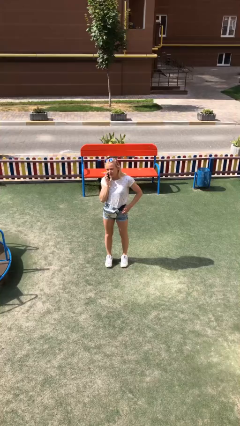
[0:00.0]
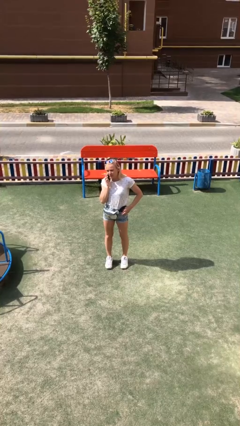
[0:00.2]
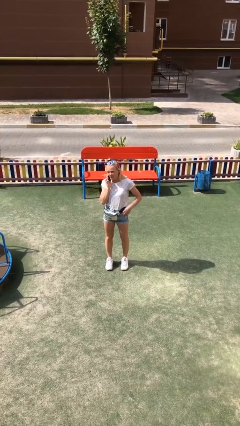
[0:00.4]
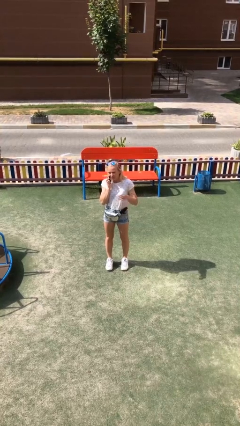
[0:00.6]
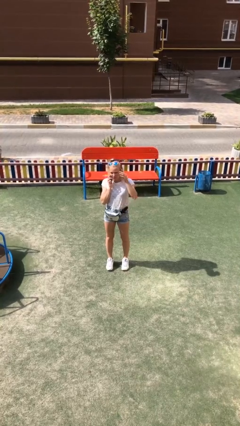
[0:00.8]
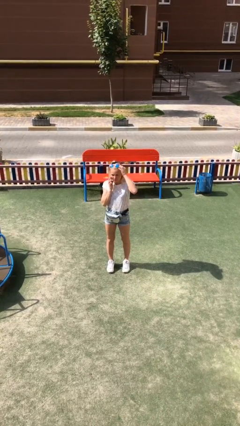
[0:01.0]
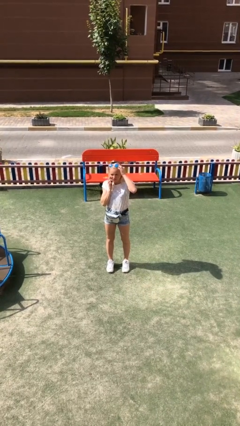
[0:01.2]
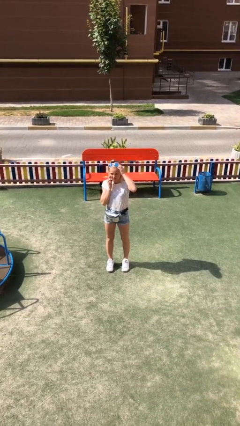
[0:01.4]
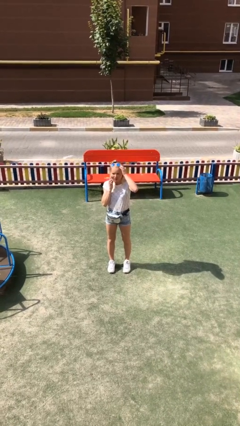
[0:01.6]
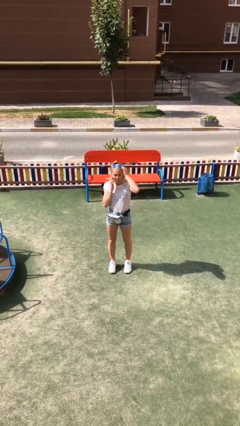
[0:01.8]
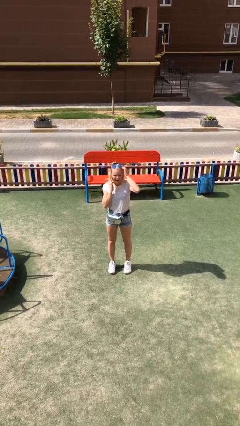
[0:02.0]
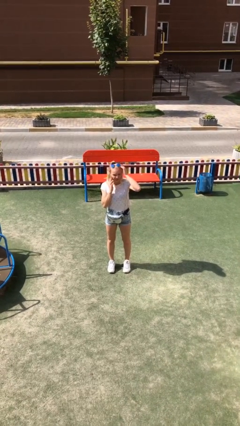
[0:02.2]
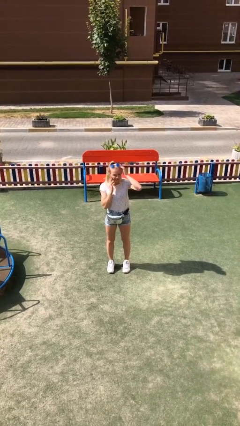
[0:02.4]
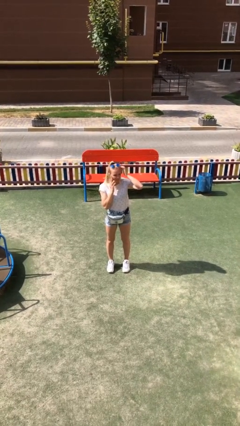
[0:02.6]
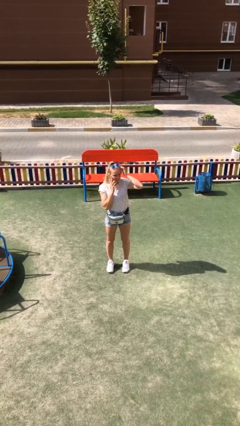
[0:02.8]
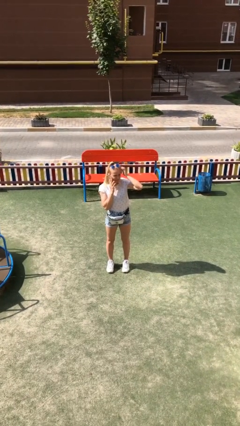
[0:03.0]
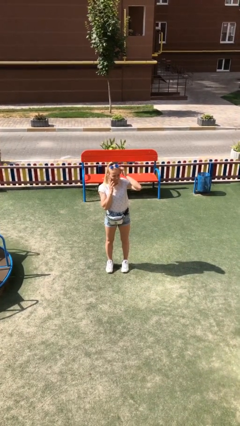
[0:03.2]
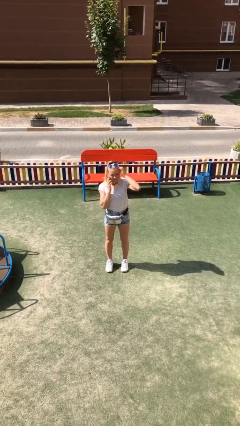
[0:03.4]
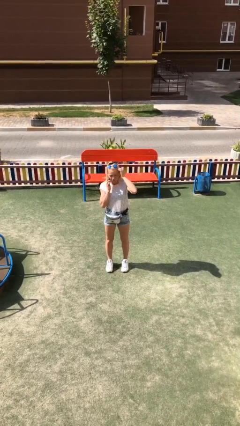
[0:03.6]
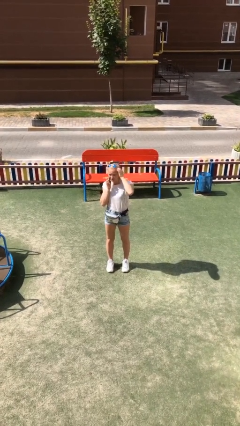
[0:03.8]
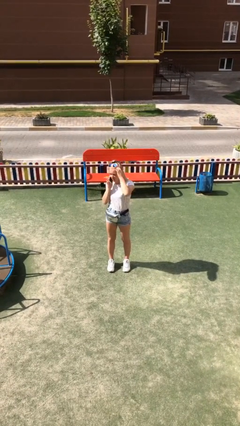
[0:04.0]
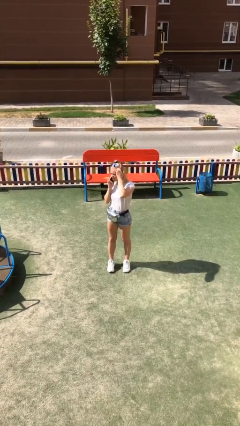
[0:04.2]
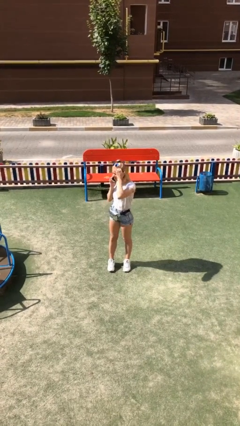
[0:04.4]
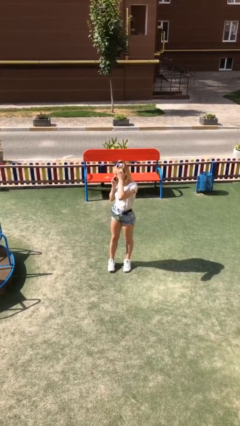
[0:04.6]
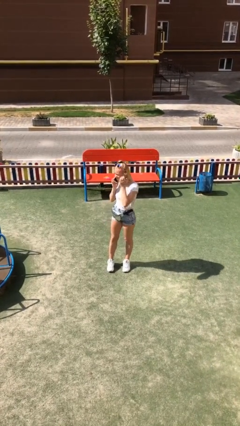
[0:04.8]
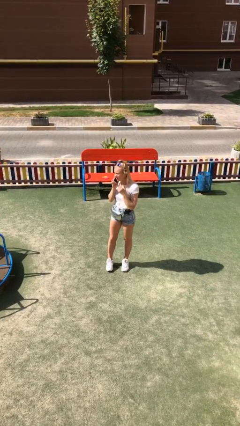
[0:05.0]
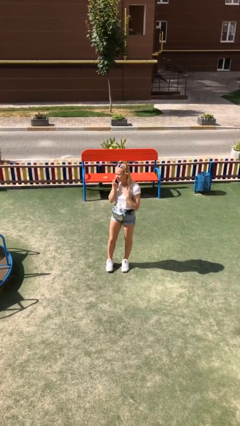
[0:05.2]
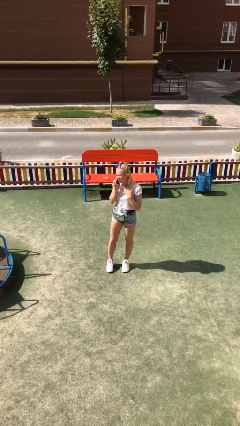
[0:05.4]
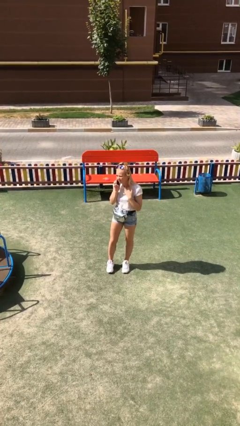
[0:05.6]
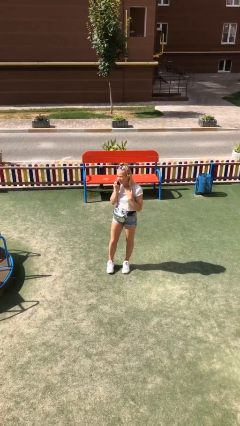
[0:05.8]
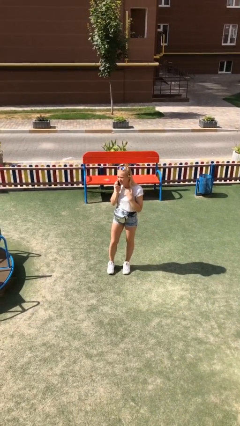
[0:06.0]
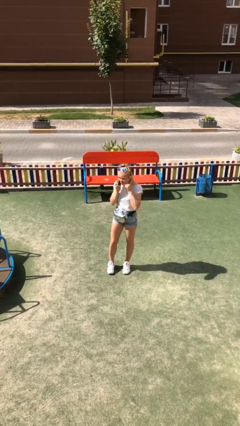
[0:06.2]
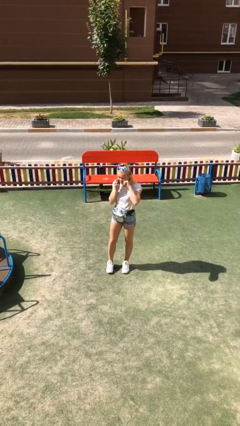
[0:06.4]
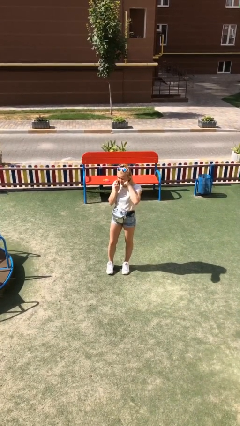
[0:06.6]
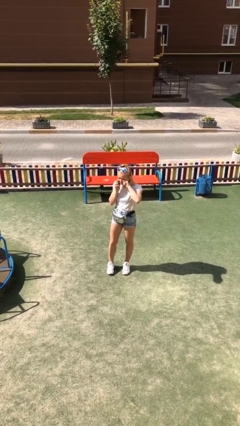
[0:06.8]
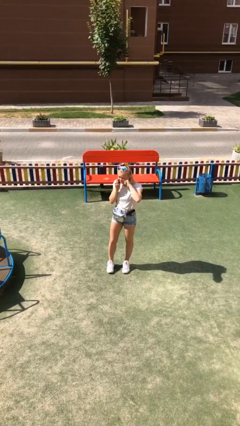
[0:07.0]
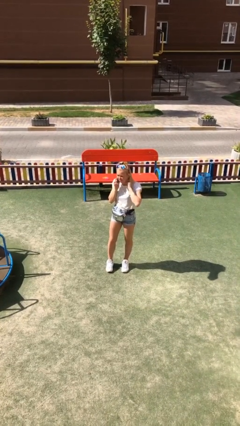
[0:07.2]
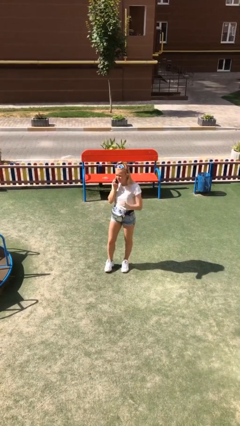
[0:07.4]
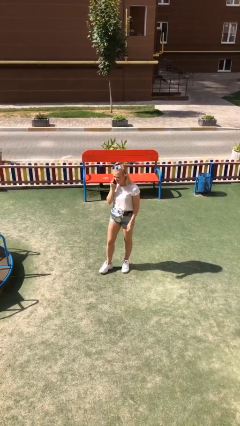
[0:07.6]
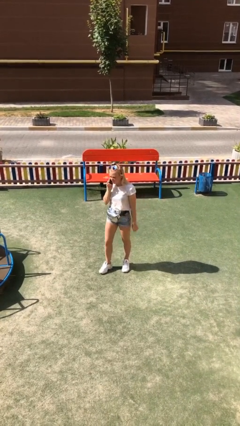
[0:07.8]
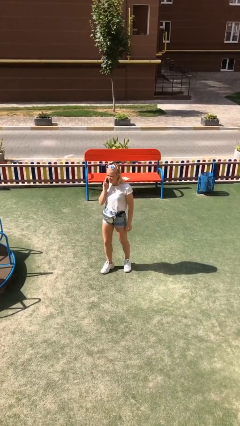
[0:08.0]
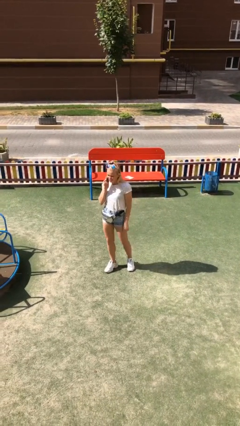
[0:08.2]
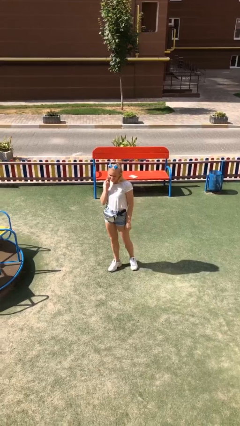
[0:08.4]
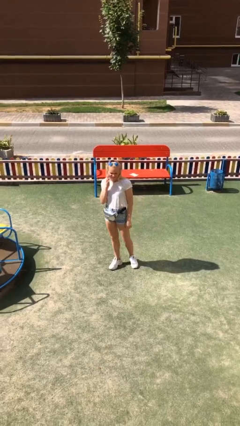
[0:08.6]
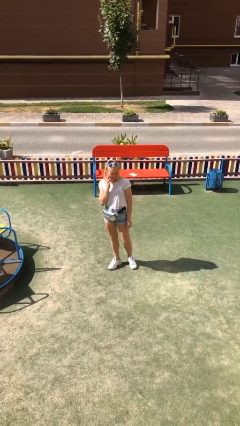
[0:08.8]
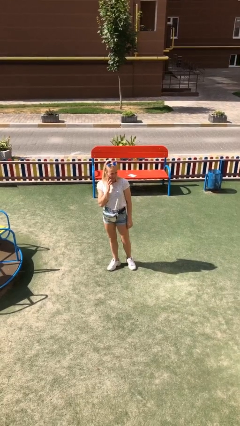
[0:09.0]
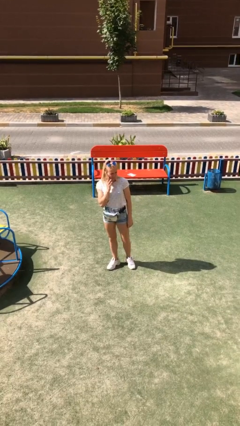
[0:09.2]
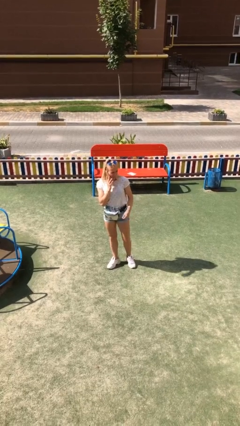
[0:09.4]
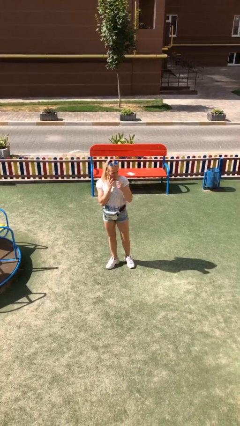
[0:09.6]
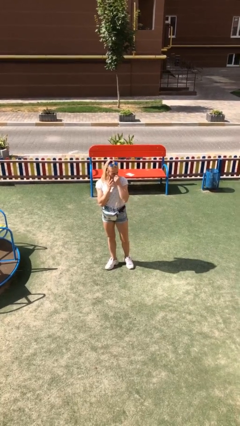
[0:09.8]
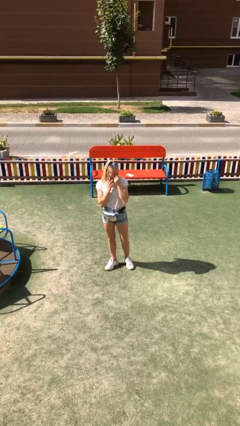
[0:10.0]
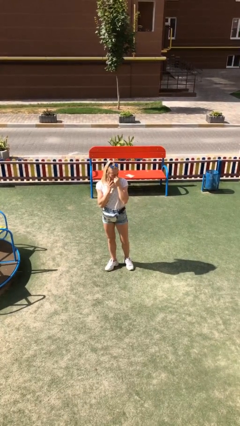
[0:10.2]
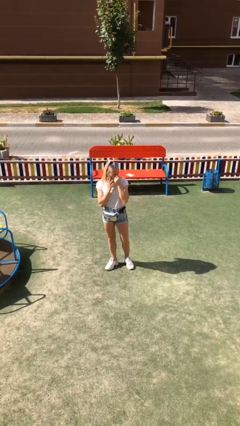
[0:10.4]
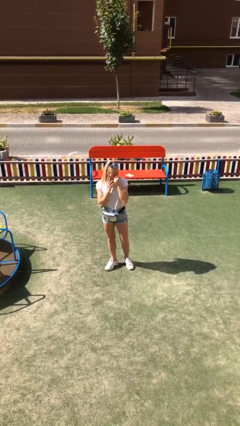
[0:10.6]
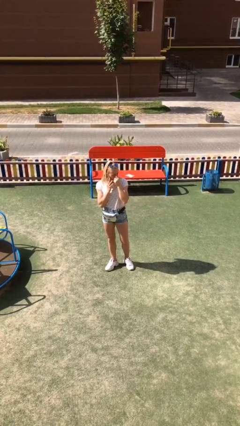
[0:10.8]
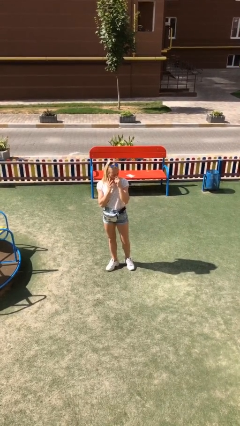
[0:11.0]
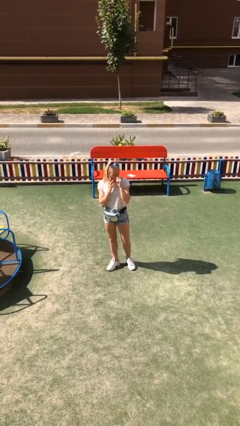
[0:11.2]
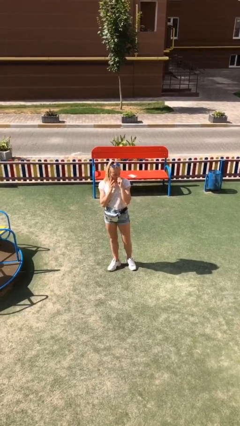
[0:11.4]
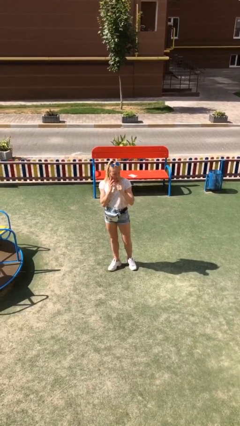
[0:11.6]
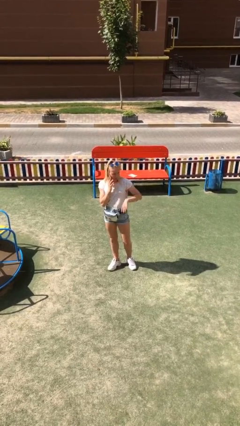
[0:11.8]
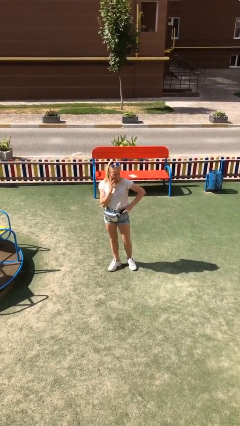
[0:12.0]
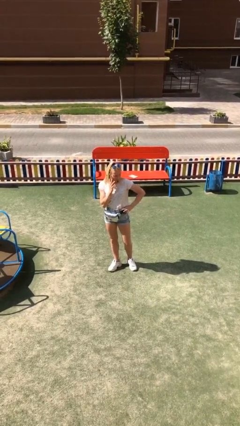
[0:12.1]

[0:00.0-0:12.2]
person talks on phone

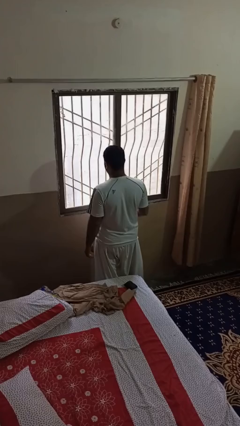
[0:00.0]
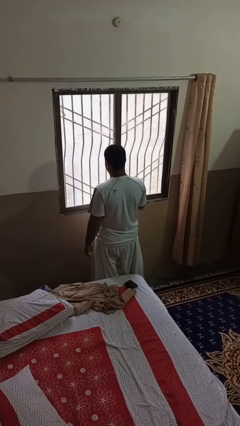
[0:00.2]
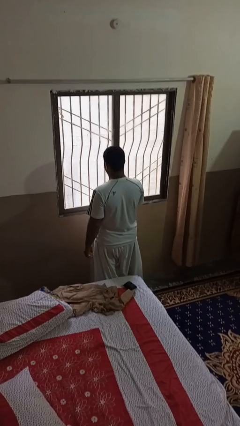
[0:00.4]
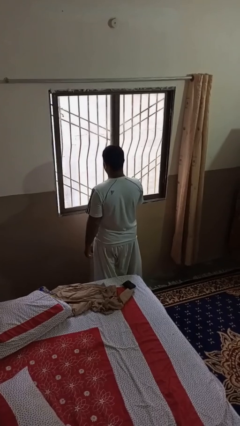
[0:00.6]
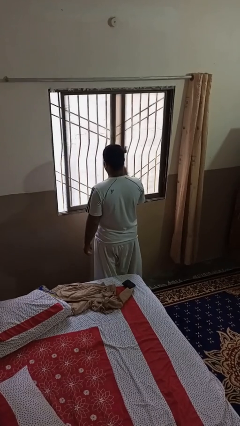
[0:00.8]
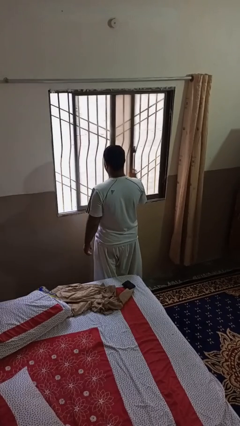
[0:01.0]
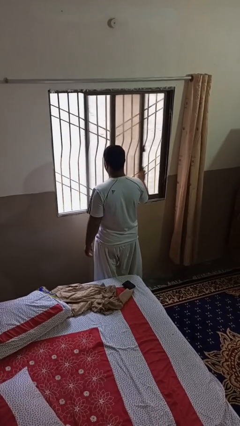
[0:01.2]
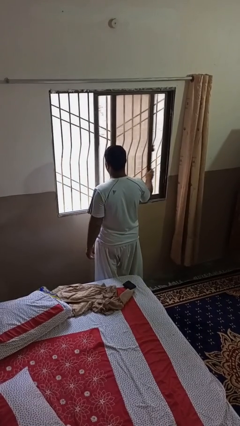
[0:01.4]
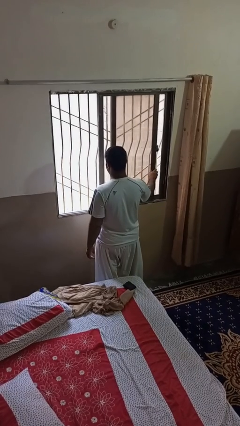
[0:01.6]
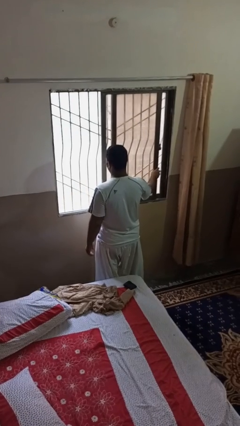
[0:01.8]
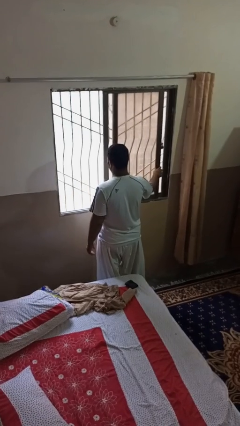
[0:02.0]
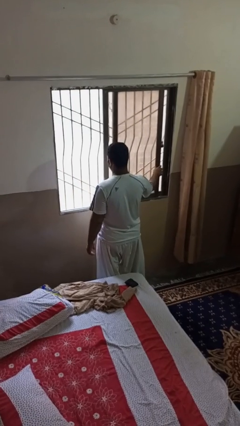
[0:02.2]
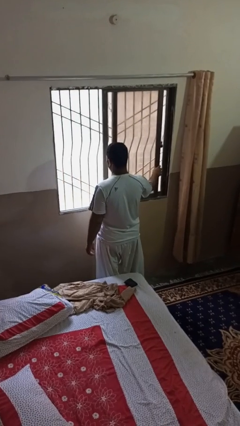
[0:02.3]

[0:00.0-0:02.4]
person opens home window

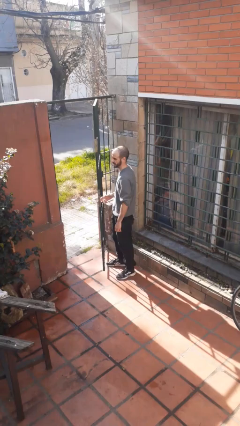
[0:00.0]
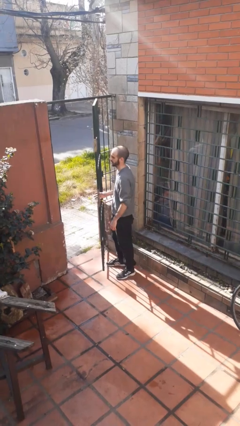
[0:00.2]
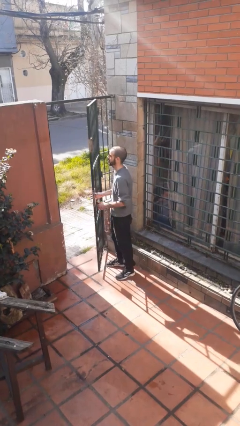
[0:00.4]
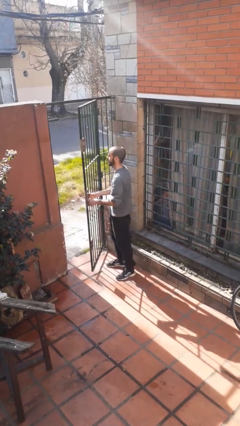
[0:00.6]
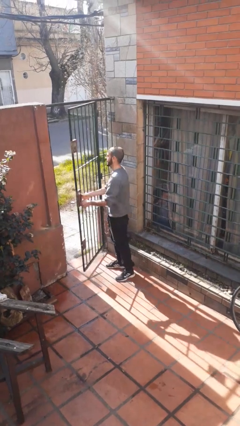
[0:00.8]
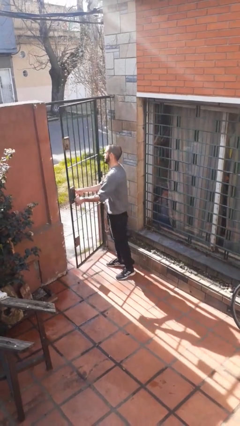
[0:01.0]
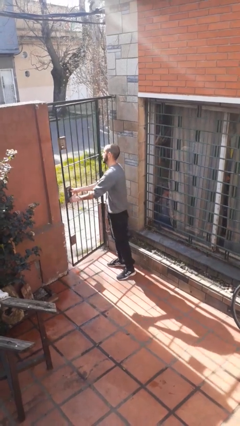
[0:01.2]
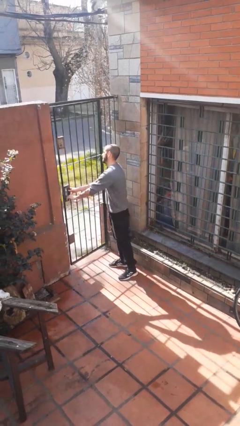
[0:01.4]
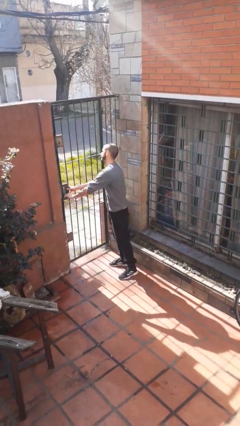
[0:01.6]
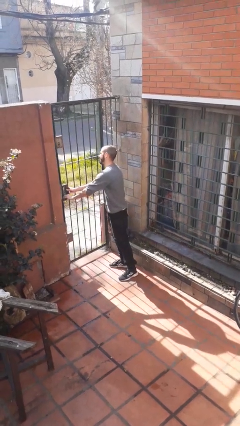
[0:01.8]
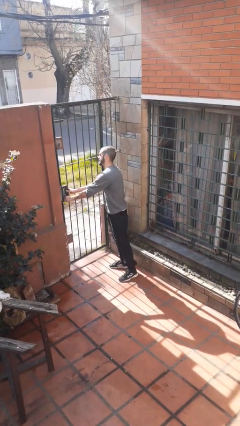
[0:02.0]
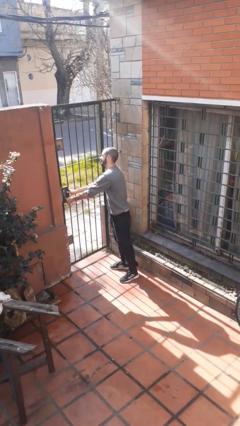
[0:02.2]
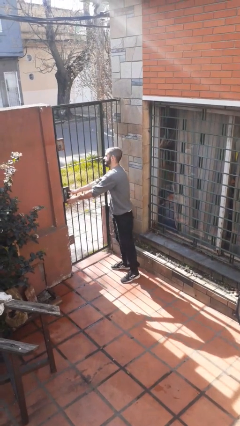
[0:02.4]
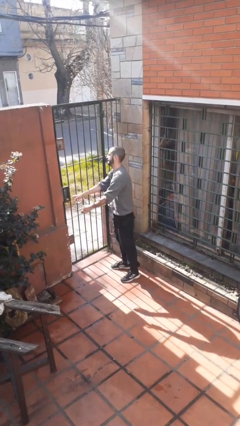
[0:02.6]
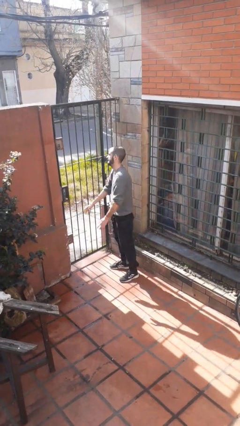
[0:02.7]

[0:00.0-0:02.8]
person closes gate

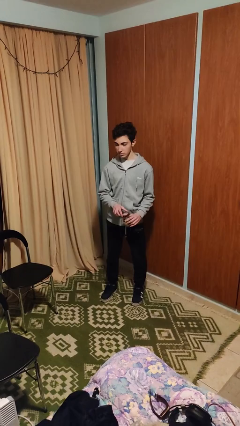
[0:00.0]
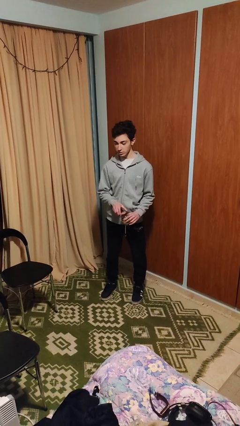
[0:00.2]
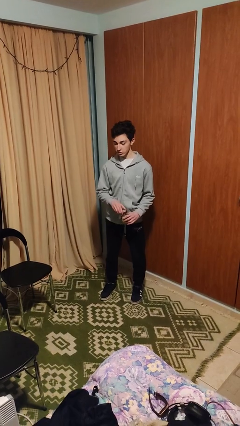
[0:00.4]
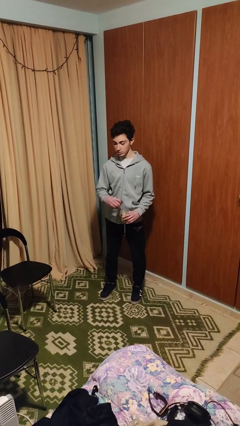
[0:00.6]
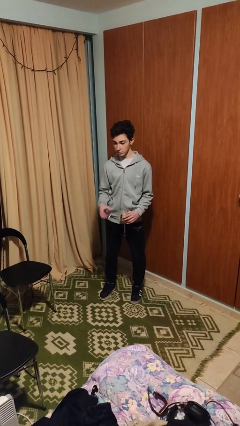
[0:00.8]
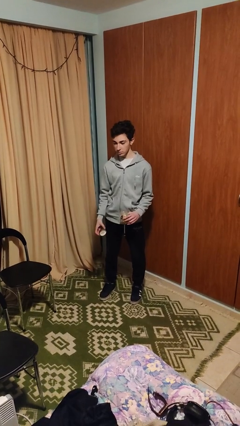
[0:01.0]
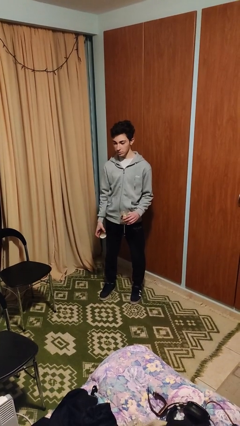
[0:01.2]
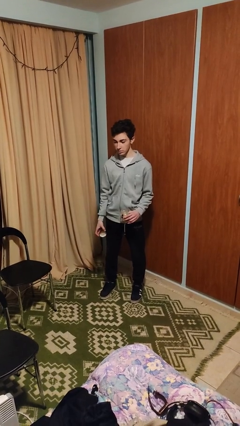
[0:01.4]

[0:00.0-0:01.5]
person opens jar
